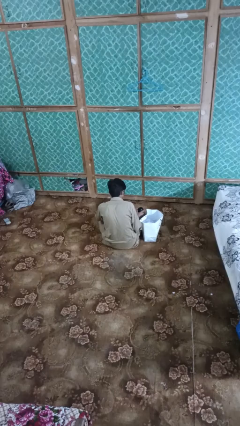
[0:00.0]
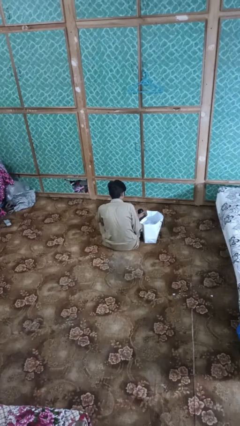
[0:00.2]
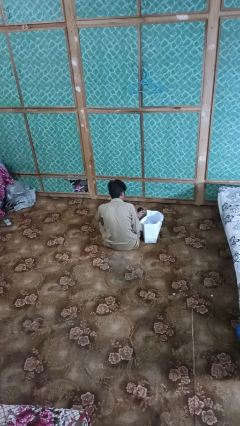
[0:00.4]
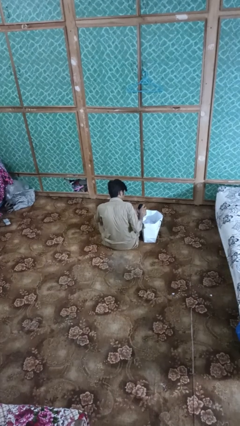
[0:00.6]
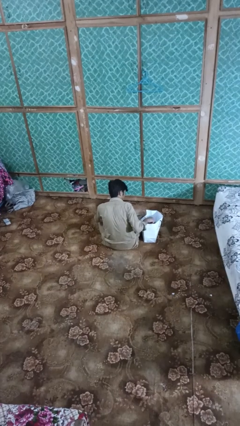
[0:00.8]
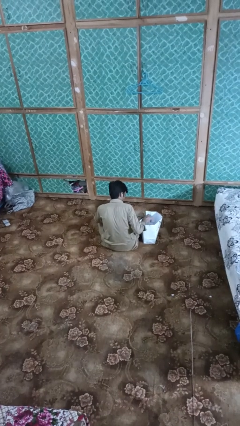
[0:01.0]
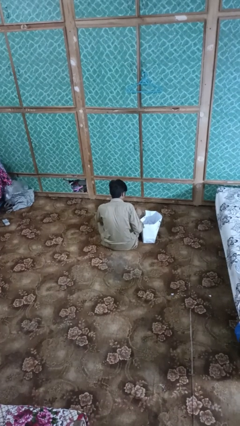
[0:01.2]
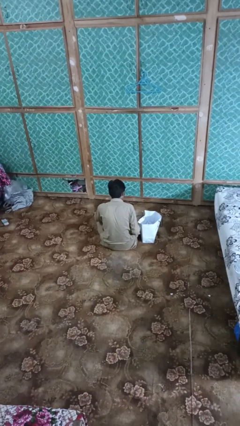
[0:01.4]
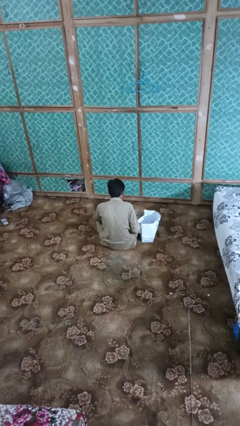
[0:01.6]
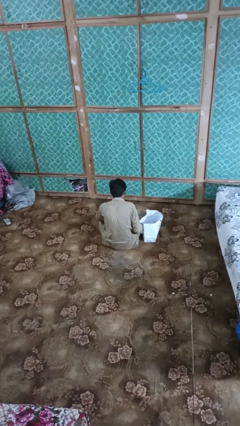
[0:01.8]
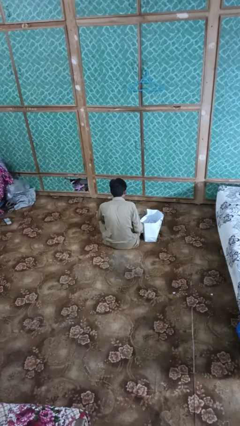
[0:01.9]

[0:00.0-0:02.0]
person puts object into bag

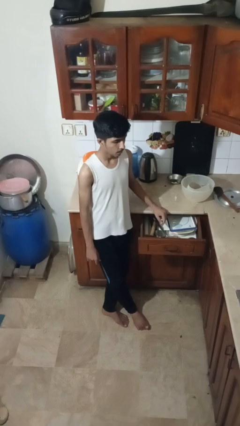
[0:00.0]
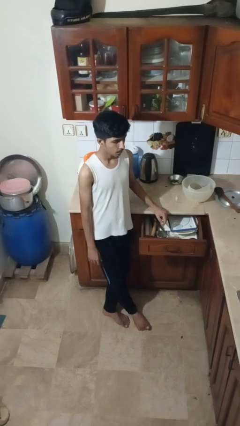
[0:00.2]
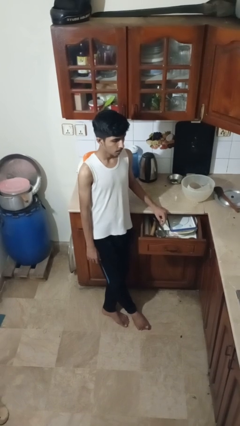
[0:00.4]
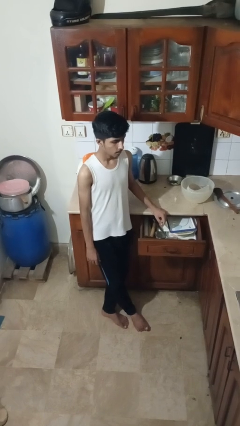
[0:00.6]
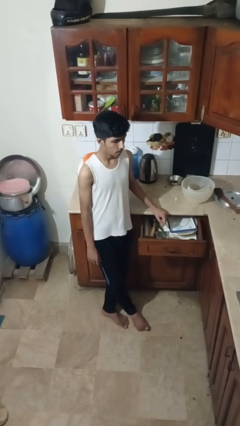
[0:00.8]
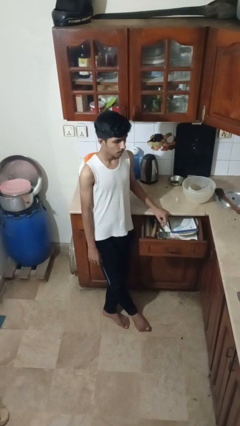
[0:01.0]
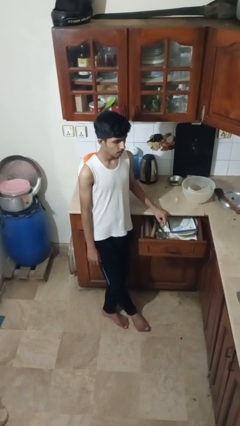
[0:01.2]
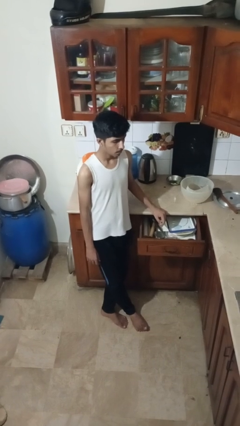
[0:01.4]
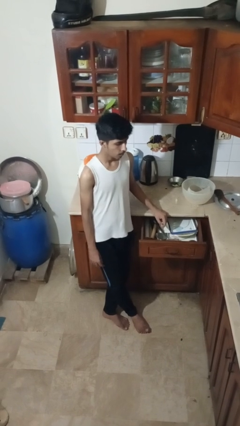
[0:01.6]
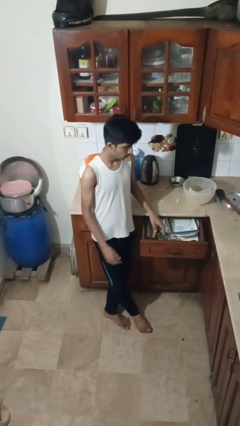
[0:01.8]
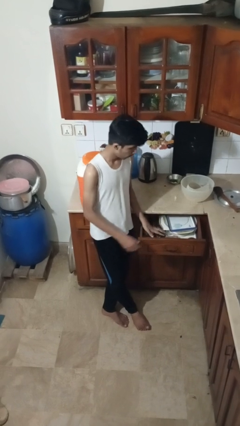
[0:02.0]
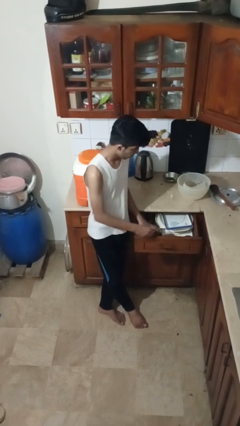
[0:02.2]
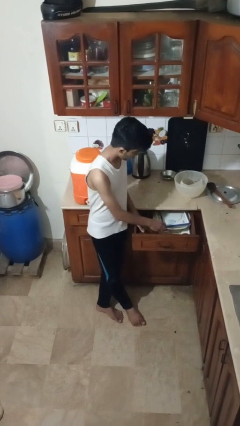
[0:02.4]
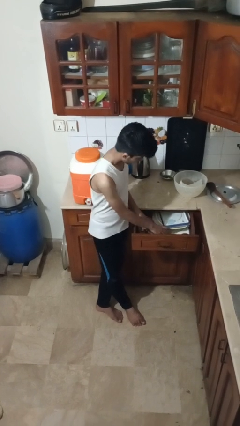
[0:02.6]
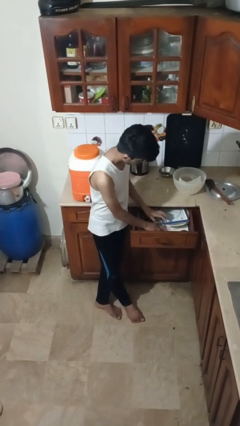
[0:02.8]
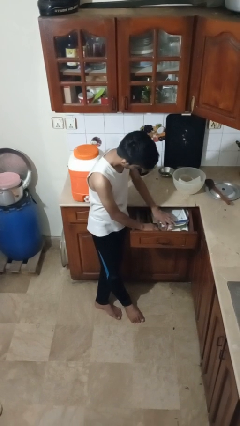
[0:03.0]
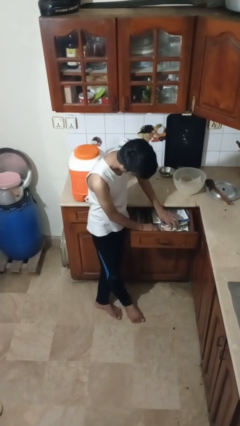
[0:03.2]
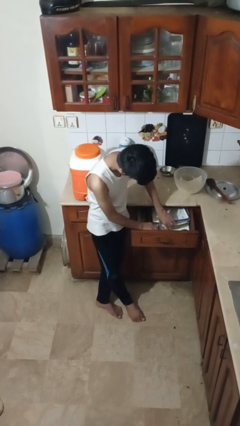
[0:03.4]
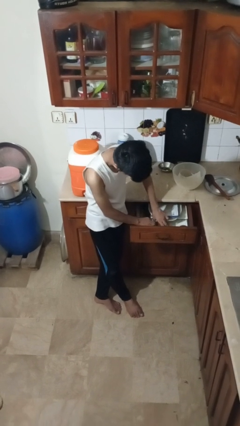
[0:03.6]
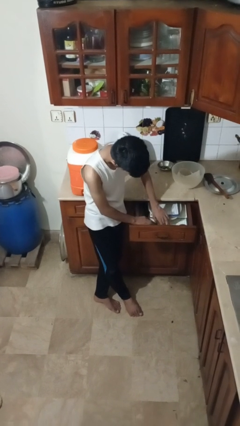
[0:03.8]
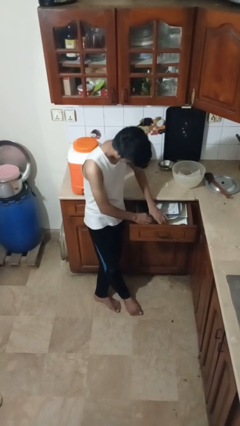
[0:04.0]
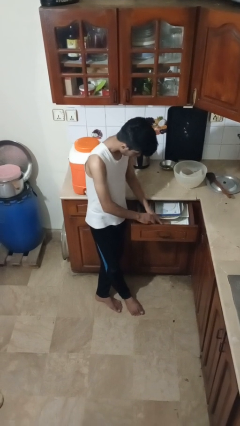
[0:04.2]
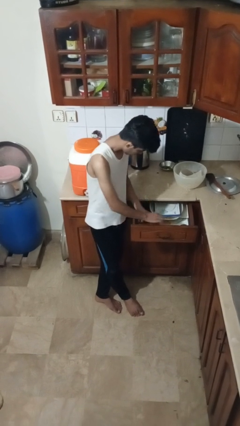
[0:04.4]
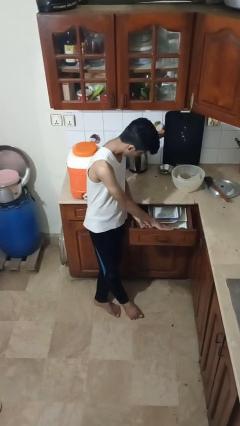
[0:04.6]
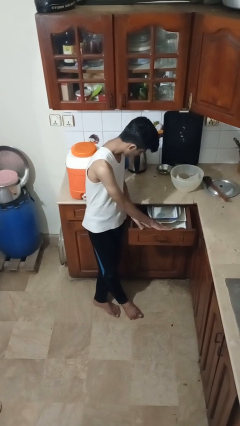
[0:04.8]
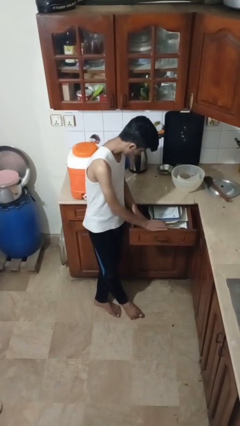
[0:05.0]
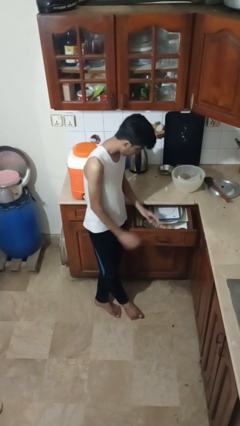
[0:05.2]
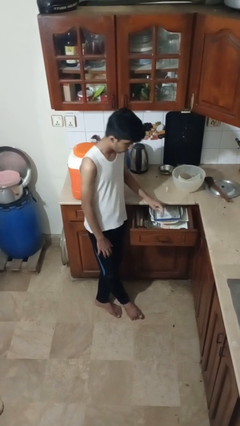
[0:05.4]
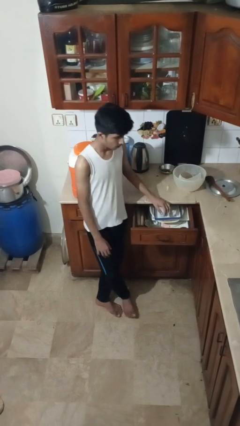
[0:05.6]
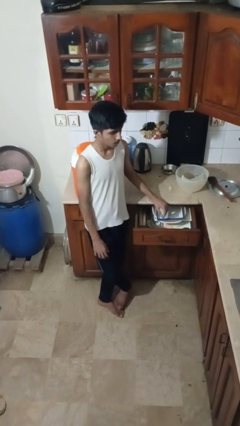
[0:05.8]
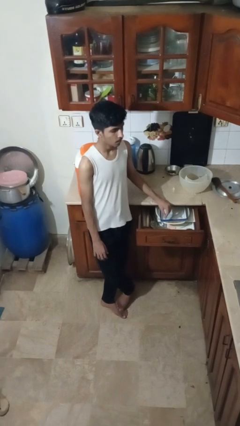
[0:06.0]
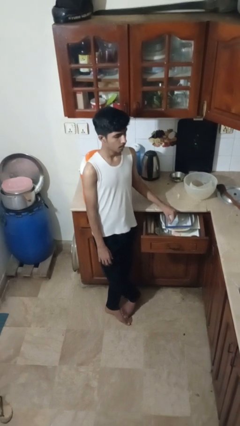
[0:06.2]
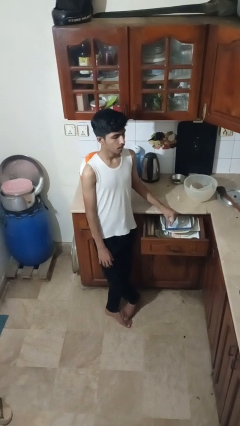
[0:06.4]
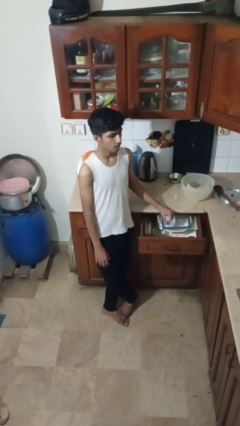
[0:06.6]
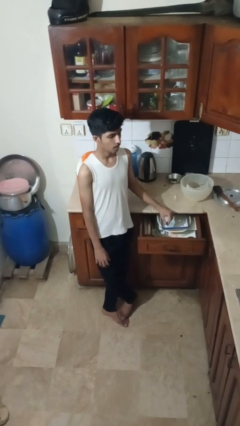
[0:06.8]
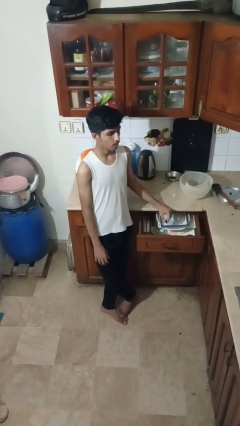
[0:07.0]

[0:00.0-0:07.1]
person searches in kitchen drawer

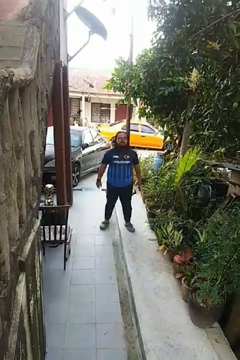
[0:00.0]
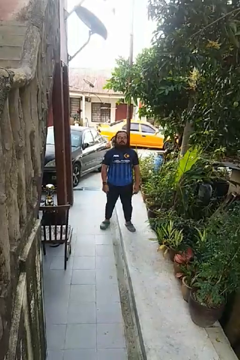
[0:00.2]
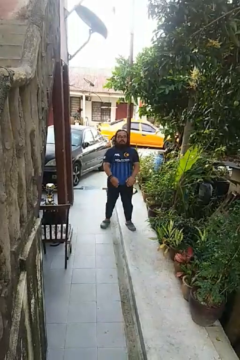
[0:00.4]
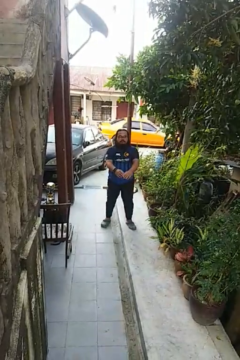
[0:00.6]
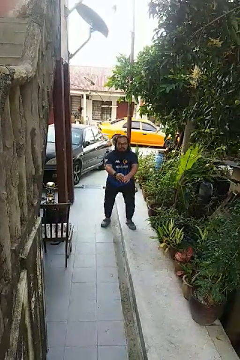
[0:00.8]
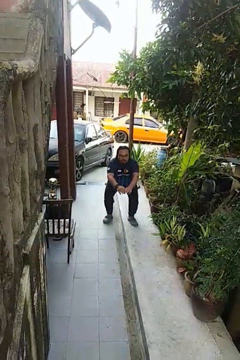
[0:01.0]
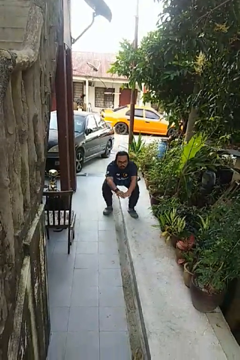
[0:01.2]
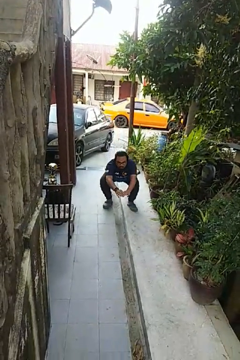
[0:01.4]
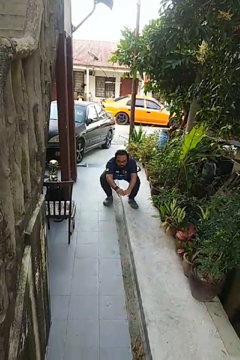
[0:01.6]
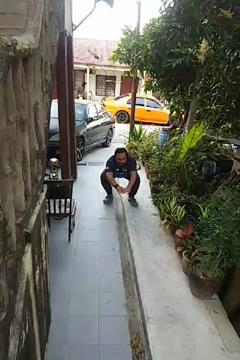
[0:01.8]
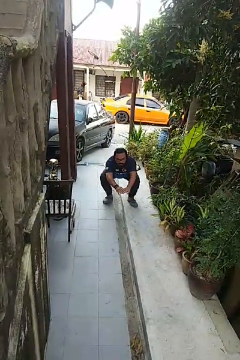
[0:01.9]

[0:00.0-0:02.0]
person squats

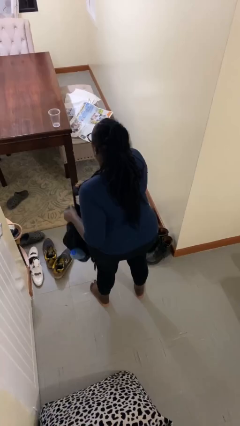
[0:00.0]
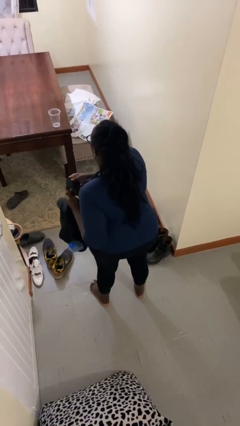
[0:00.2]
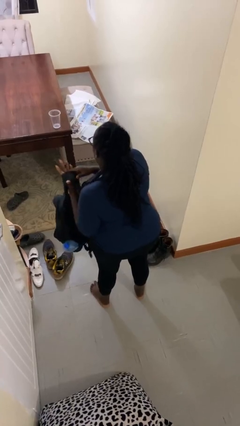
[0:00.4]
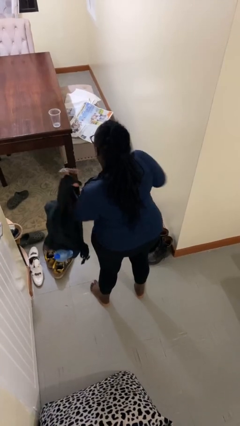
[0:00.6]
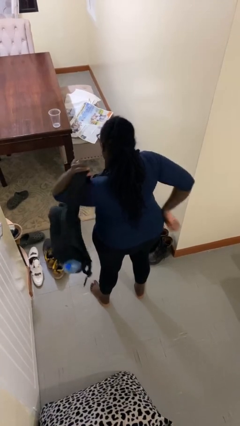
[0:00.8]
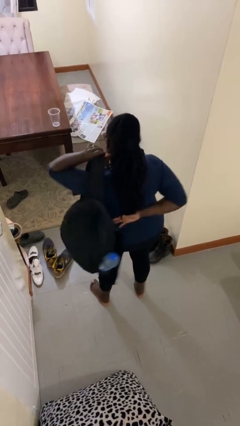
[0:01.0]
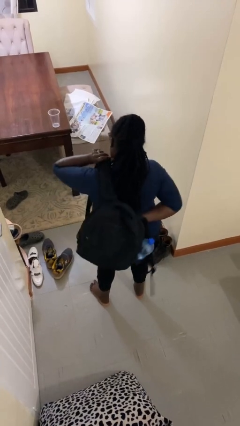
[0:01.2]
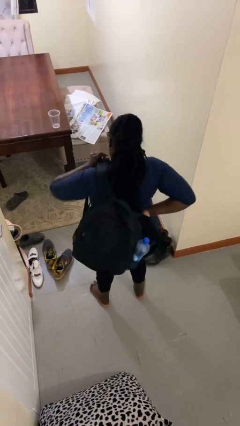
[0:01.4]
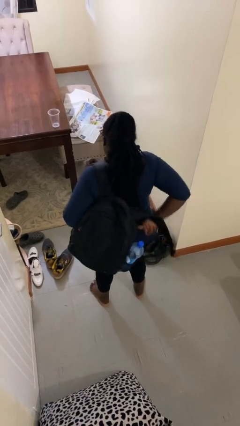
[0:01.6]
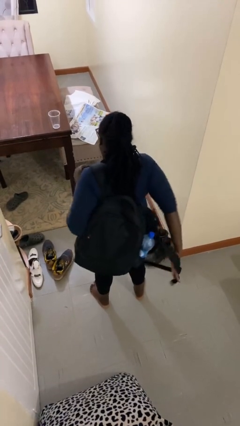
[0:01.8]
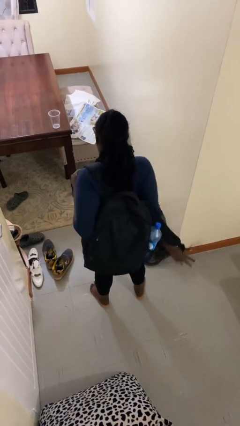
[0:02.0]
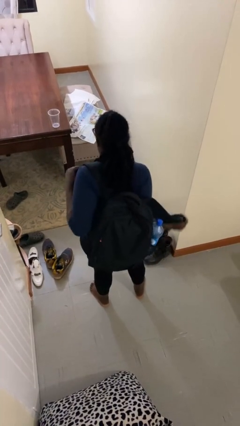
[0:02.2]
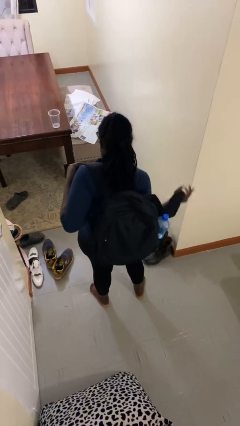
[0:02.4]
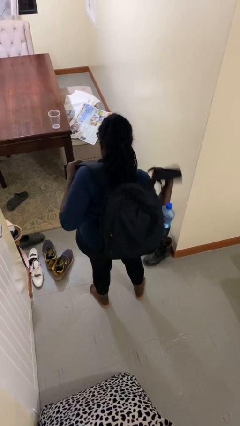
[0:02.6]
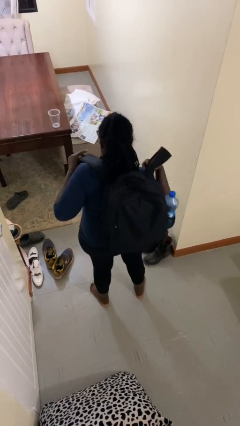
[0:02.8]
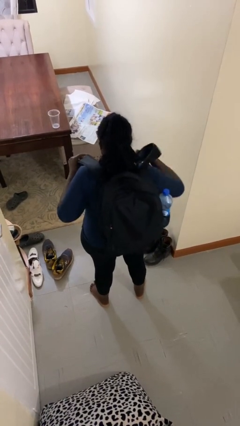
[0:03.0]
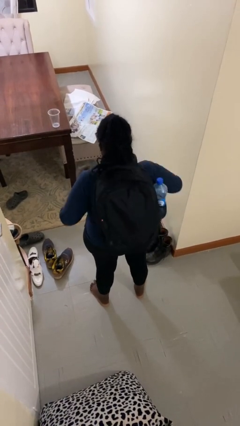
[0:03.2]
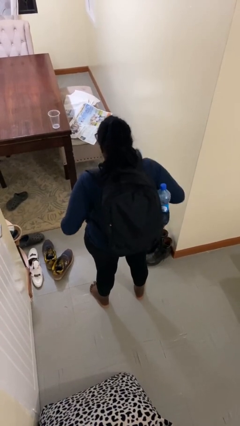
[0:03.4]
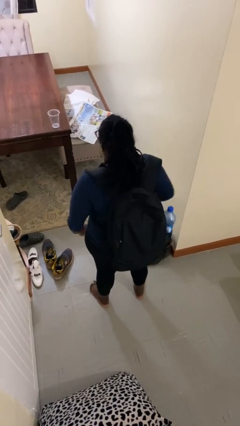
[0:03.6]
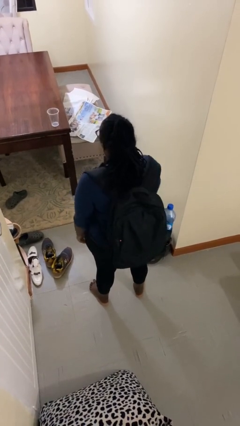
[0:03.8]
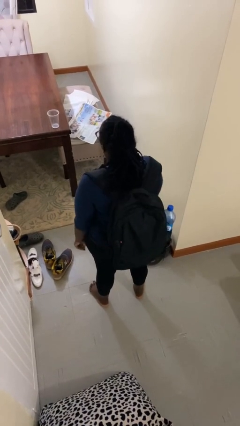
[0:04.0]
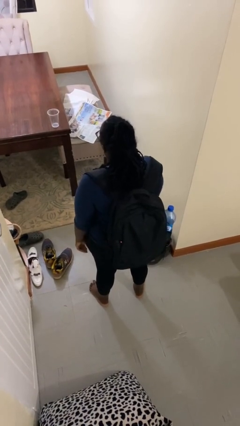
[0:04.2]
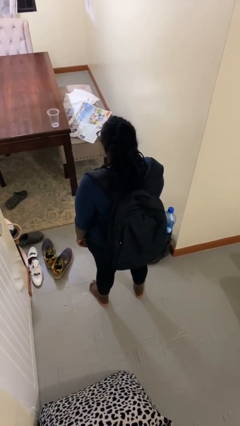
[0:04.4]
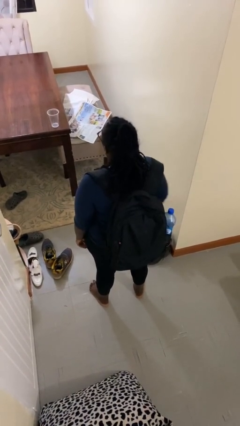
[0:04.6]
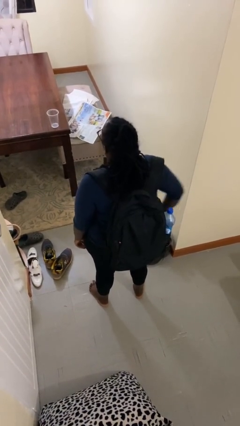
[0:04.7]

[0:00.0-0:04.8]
person puts on backpack

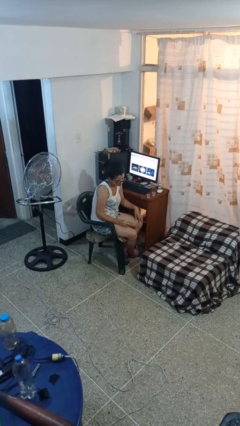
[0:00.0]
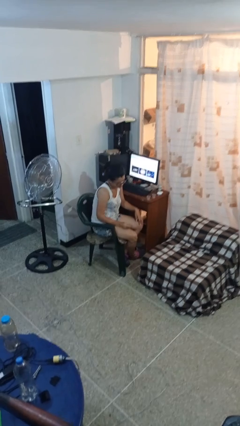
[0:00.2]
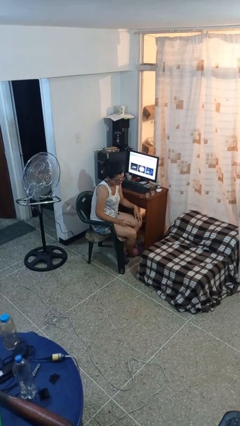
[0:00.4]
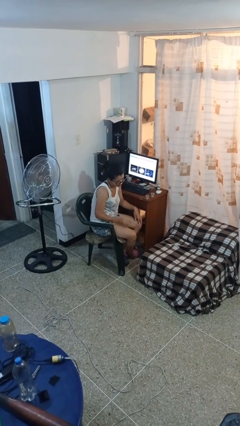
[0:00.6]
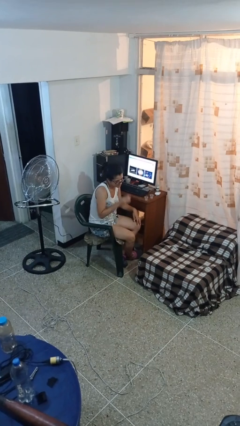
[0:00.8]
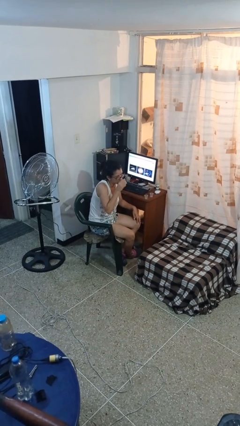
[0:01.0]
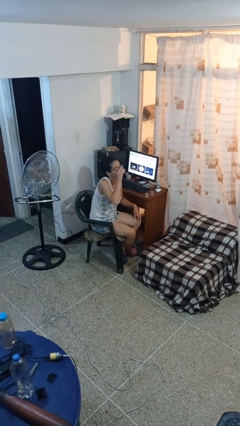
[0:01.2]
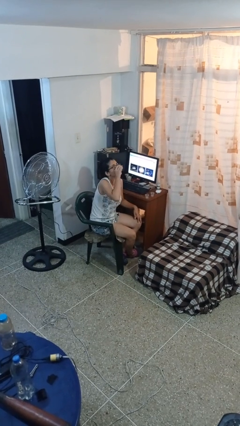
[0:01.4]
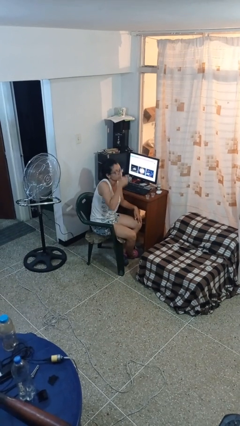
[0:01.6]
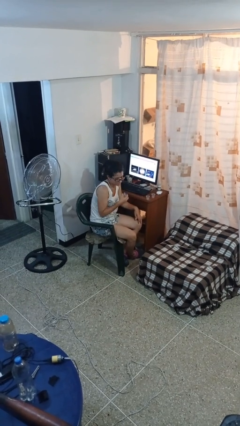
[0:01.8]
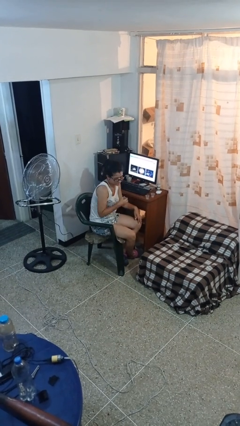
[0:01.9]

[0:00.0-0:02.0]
person drinks from shotglass
